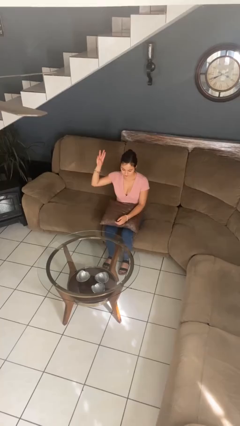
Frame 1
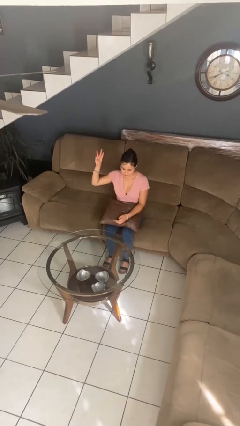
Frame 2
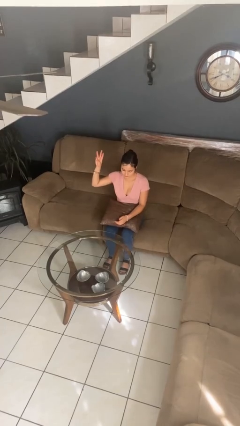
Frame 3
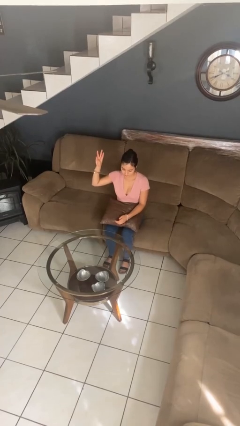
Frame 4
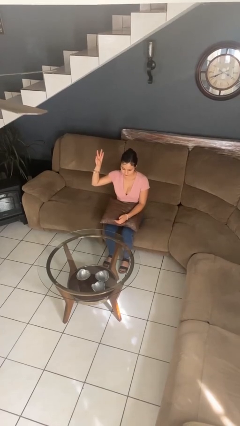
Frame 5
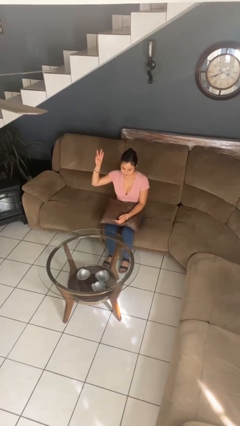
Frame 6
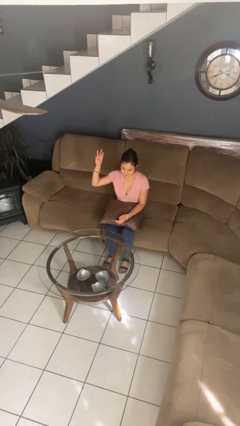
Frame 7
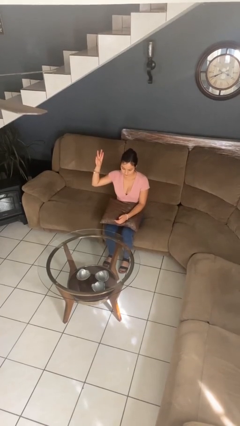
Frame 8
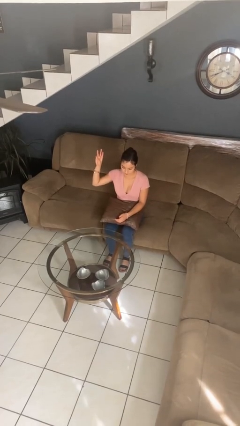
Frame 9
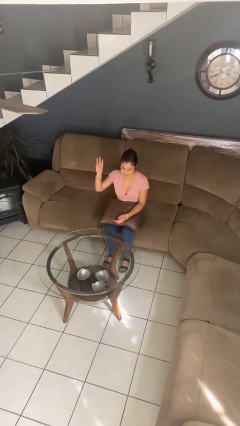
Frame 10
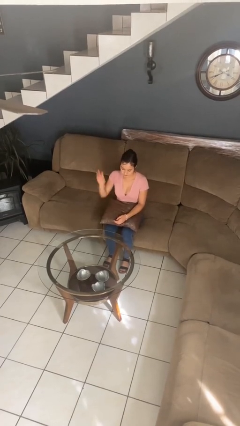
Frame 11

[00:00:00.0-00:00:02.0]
person gestures number three

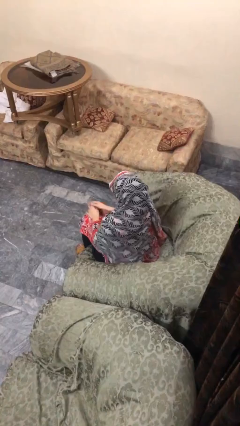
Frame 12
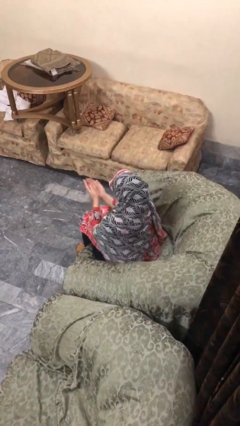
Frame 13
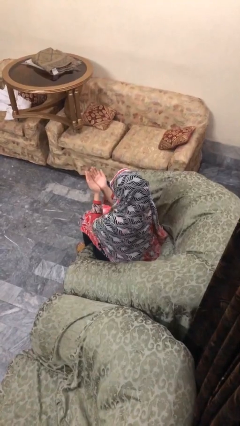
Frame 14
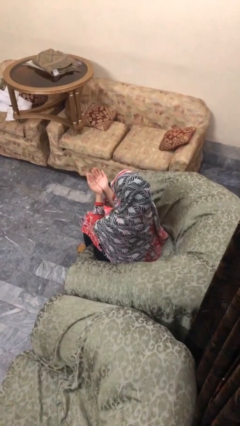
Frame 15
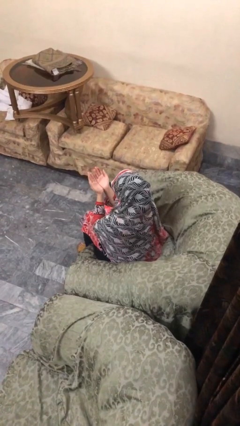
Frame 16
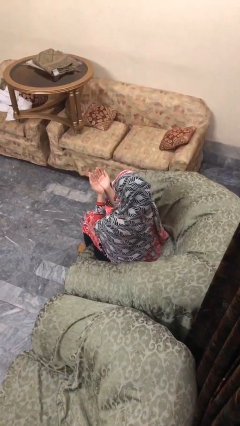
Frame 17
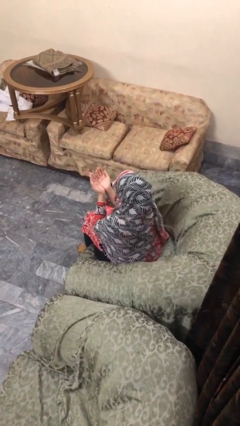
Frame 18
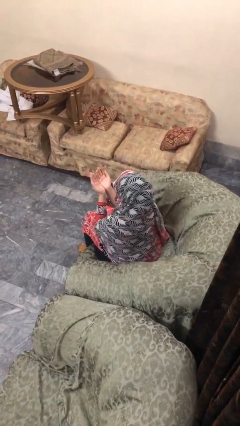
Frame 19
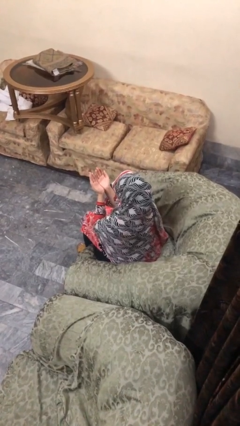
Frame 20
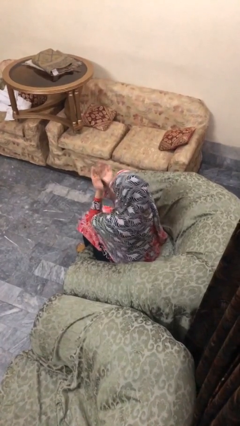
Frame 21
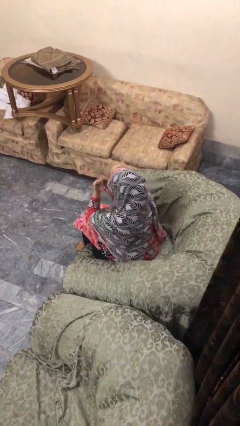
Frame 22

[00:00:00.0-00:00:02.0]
person prays

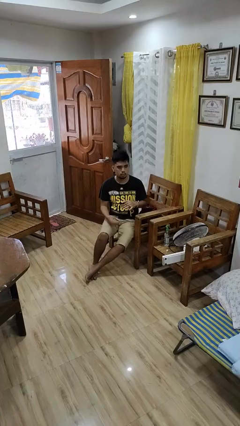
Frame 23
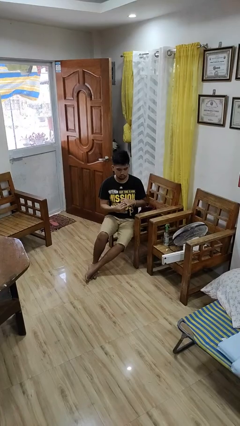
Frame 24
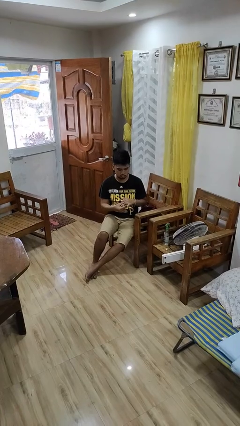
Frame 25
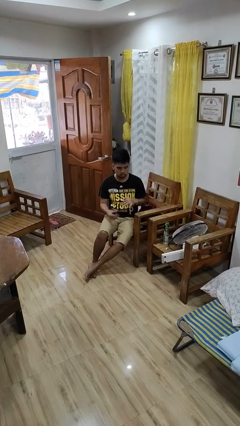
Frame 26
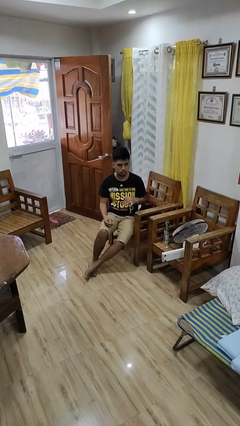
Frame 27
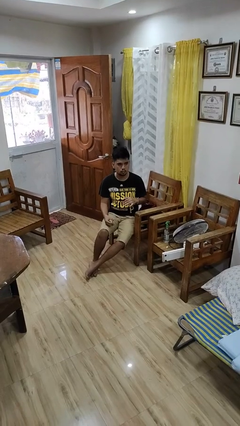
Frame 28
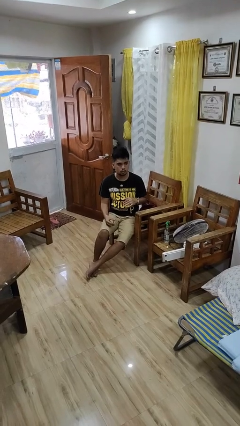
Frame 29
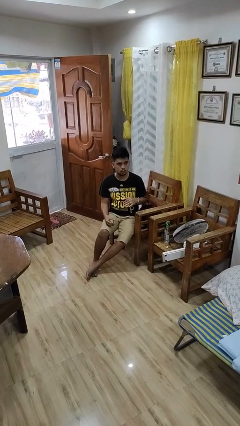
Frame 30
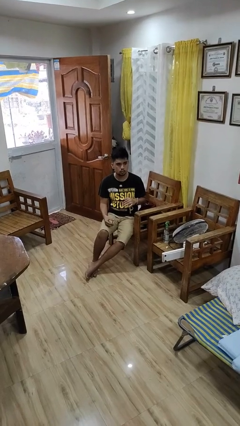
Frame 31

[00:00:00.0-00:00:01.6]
person takes off ring

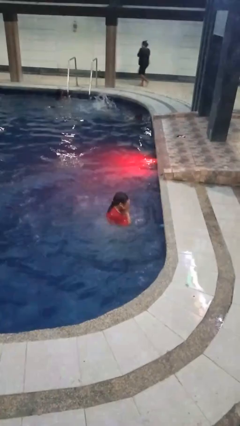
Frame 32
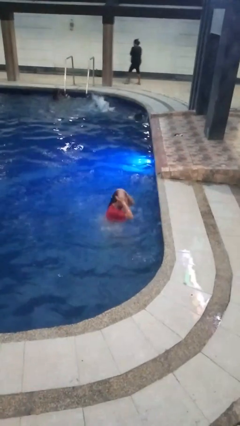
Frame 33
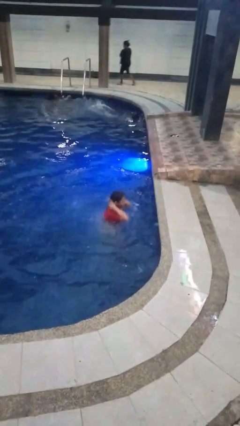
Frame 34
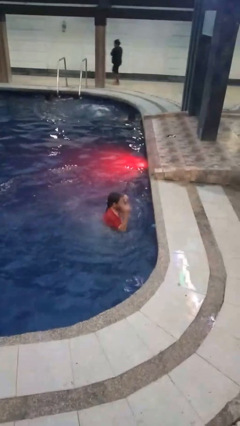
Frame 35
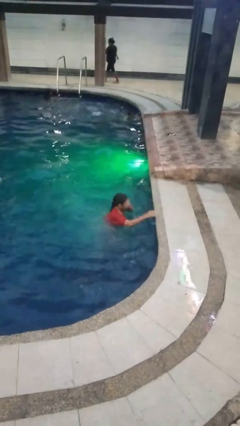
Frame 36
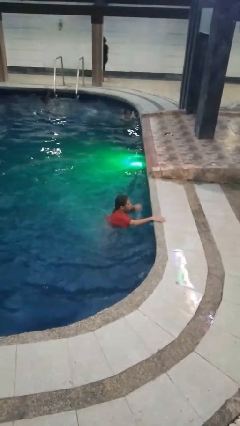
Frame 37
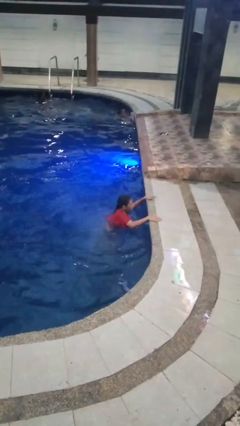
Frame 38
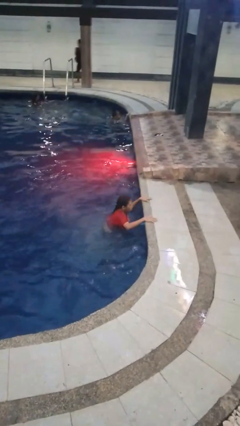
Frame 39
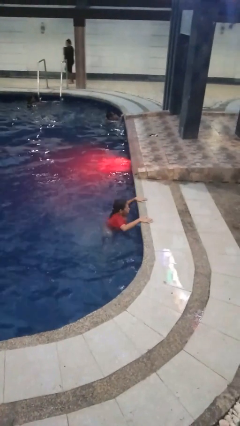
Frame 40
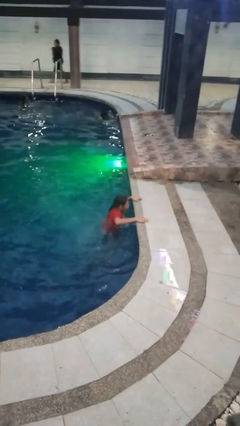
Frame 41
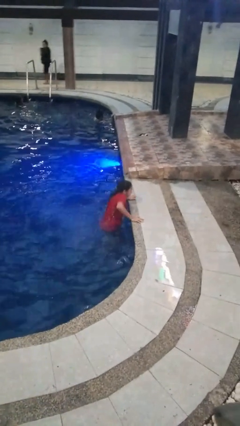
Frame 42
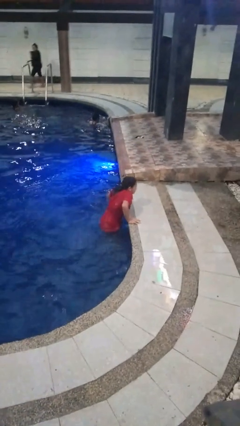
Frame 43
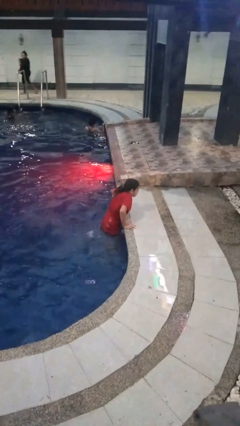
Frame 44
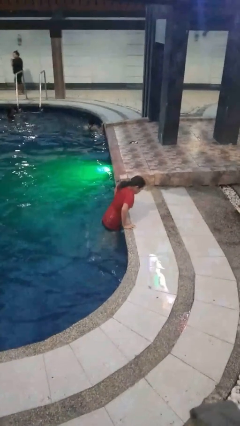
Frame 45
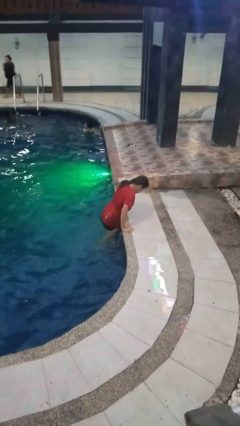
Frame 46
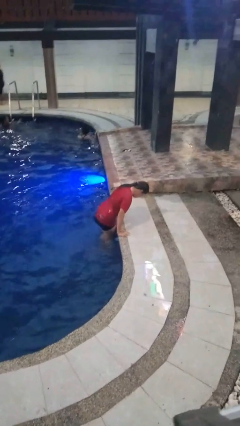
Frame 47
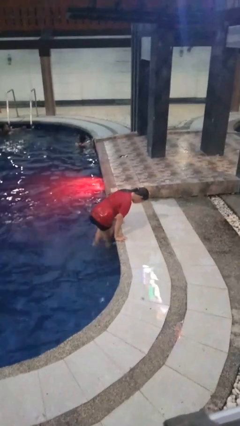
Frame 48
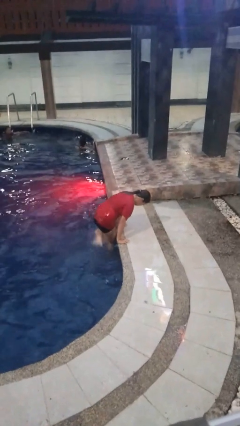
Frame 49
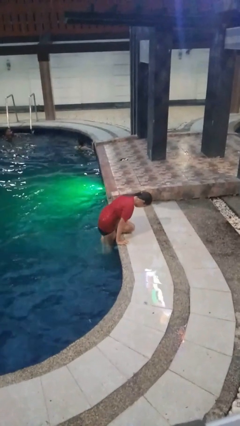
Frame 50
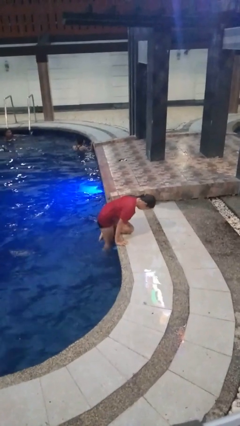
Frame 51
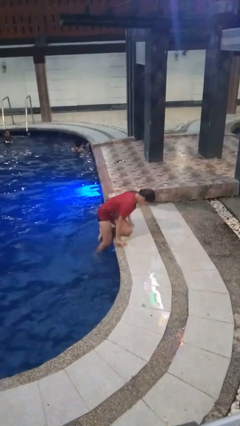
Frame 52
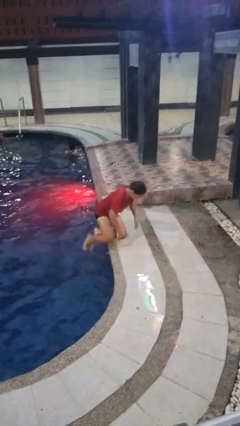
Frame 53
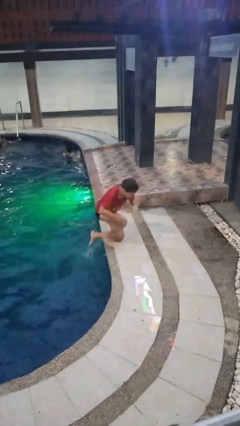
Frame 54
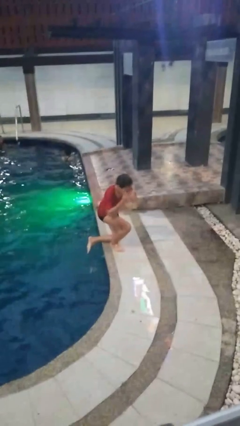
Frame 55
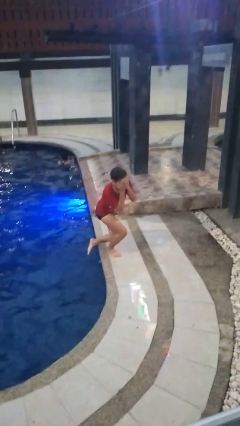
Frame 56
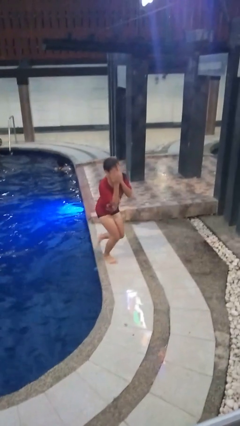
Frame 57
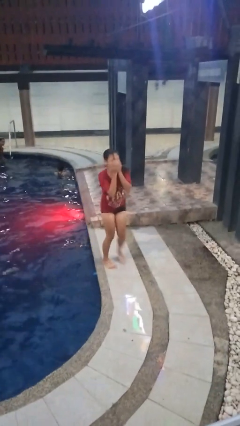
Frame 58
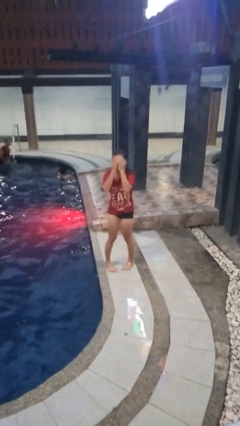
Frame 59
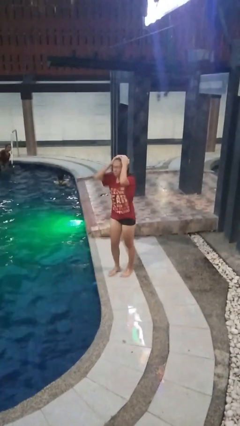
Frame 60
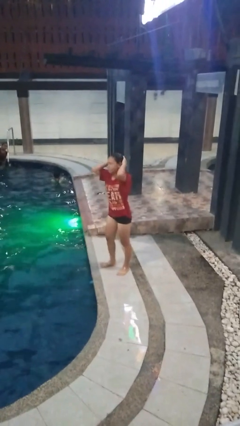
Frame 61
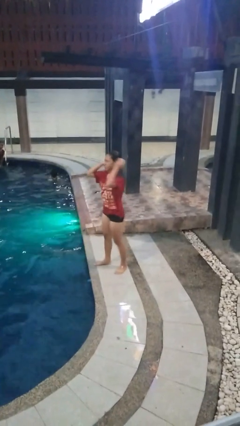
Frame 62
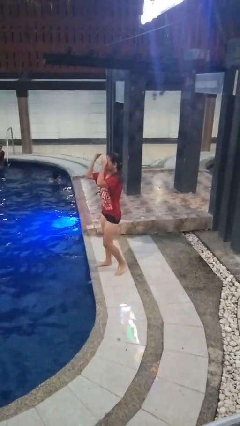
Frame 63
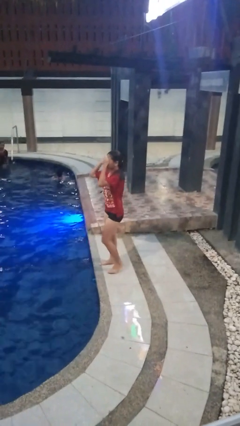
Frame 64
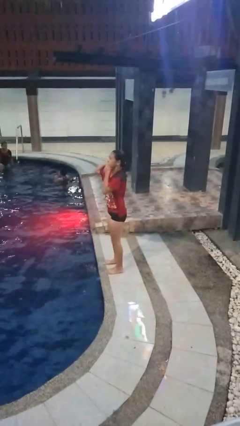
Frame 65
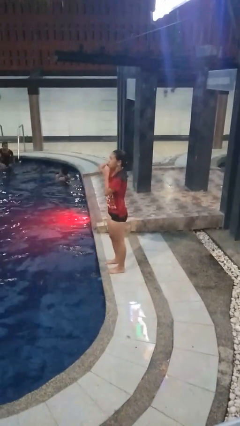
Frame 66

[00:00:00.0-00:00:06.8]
person exits pool

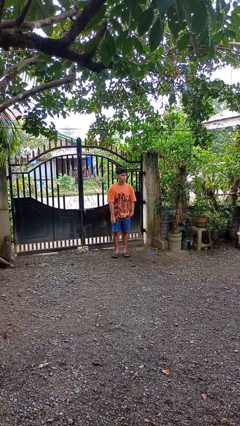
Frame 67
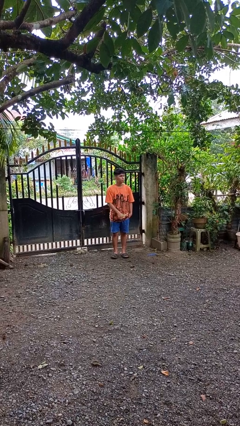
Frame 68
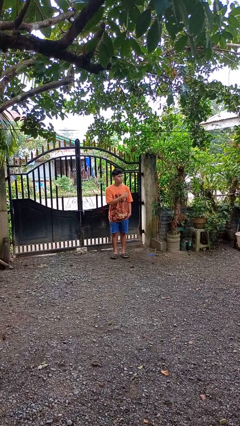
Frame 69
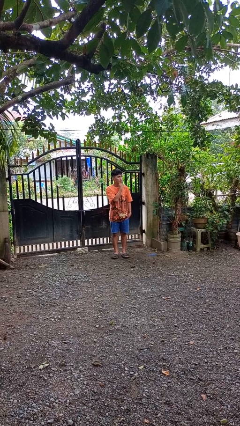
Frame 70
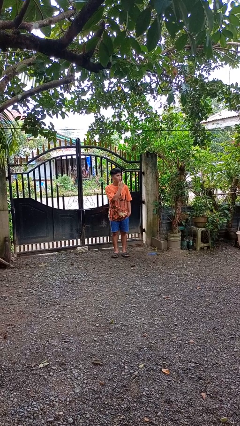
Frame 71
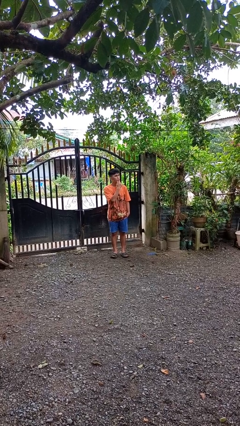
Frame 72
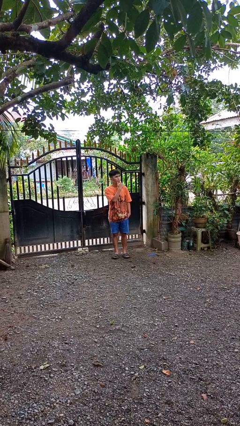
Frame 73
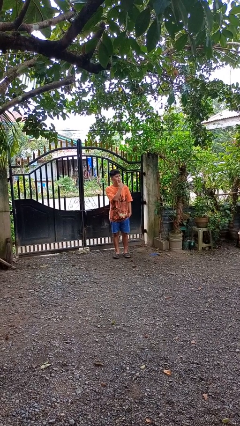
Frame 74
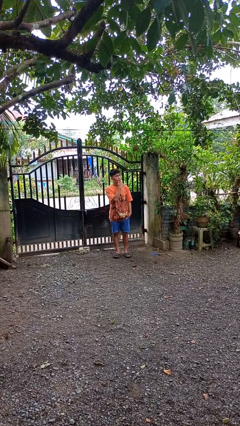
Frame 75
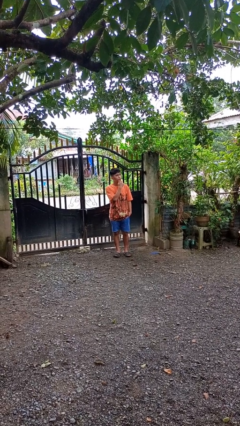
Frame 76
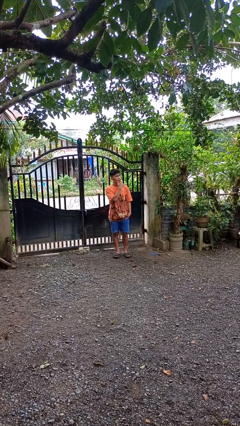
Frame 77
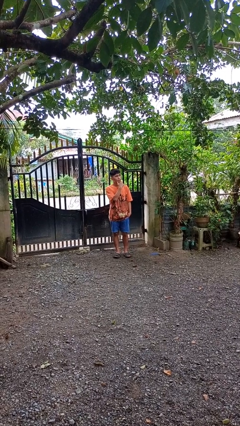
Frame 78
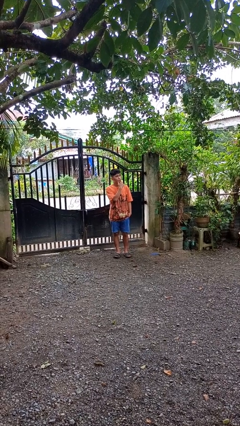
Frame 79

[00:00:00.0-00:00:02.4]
person strokes chin

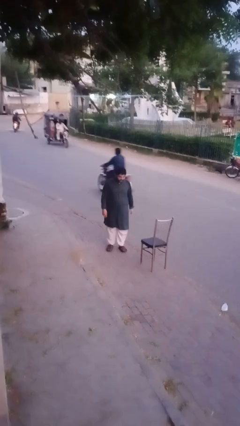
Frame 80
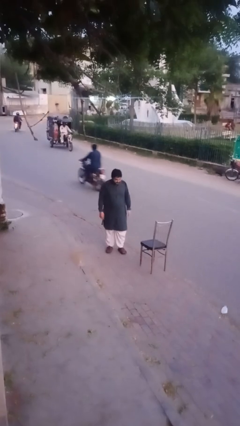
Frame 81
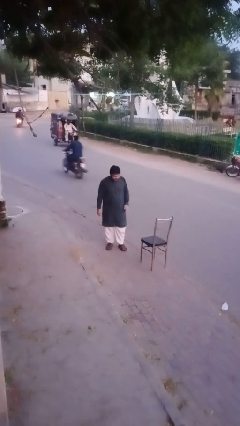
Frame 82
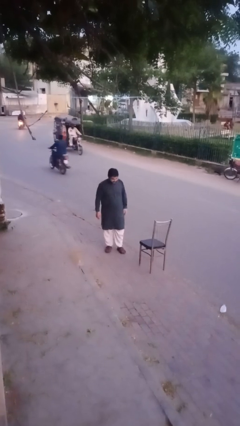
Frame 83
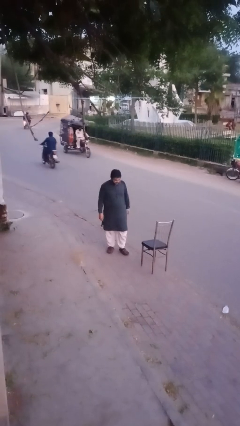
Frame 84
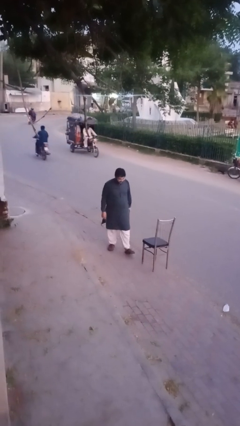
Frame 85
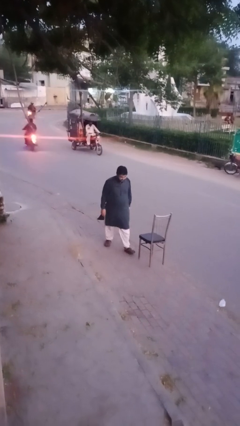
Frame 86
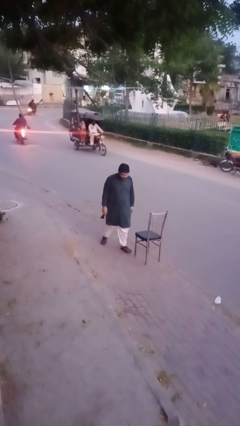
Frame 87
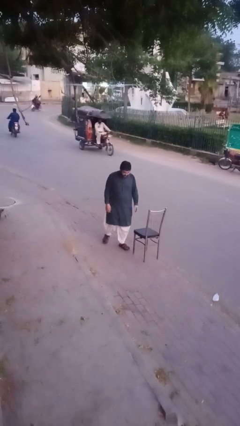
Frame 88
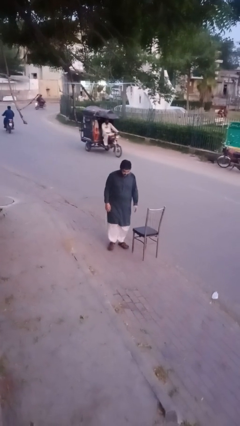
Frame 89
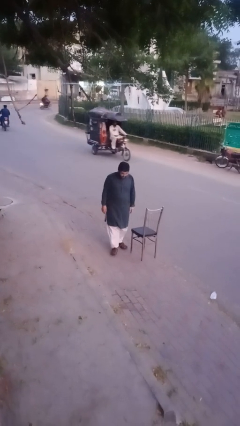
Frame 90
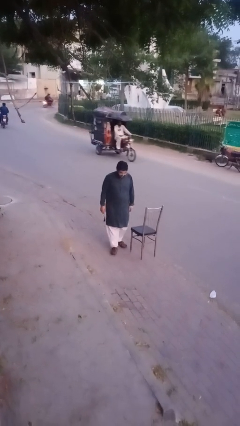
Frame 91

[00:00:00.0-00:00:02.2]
person trips on object on floor

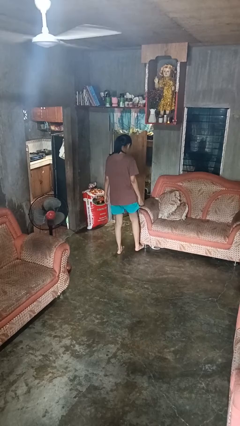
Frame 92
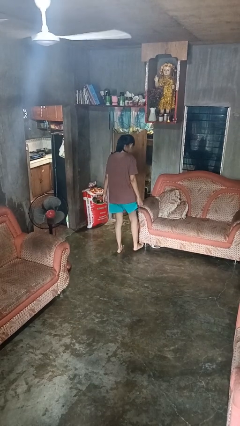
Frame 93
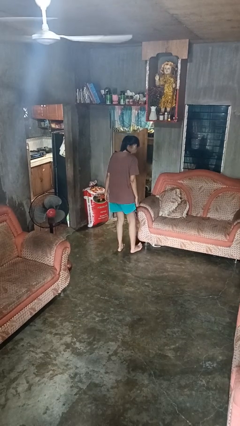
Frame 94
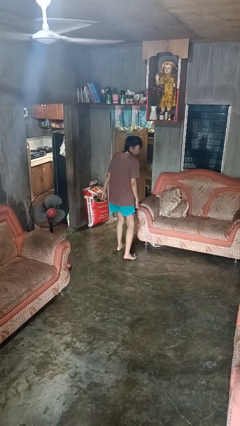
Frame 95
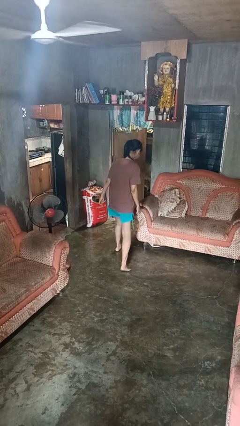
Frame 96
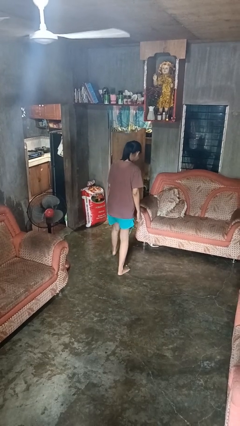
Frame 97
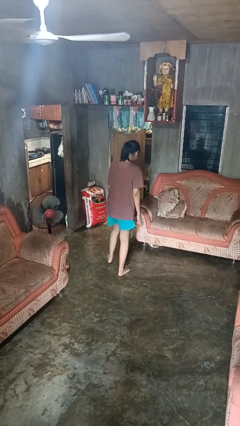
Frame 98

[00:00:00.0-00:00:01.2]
person stubs toe
